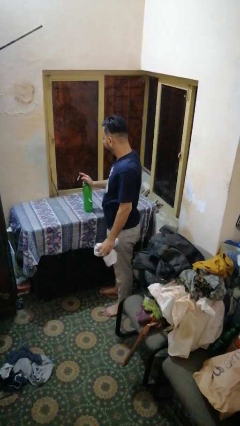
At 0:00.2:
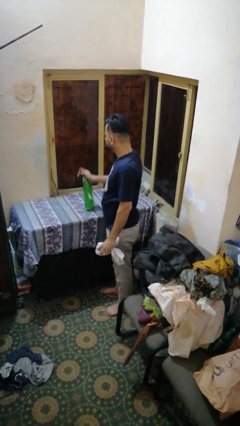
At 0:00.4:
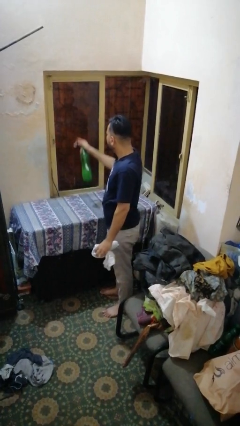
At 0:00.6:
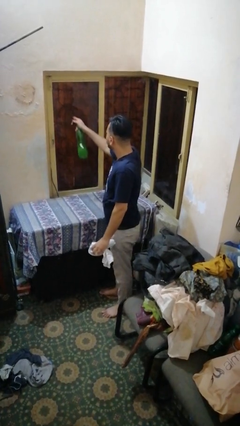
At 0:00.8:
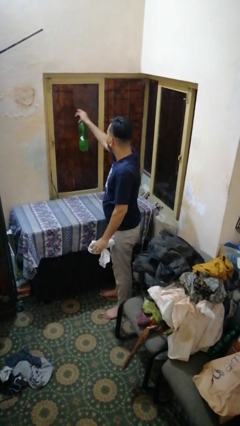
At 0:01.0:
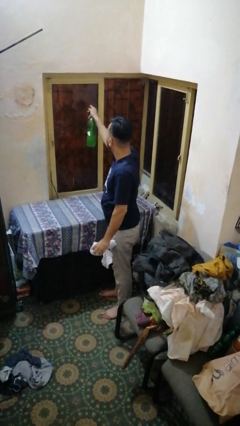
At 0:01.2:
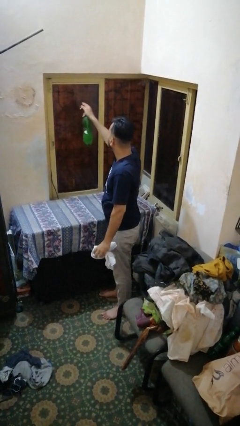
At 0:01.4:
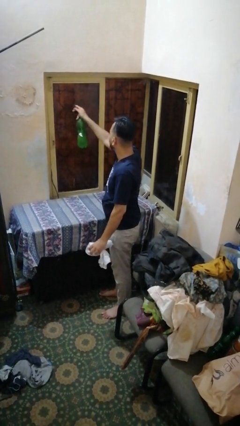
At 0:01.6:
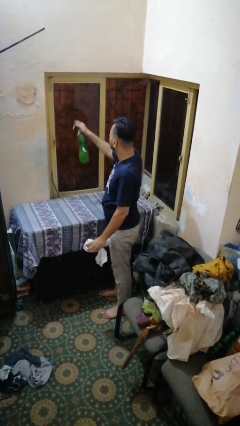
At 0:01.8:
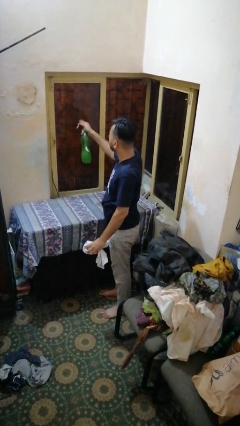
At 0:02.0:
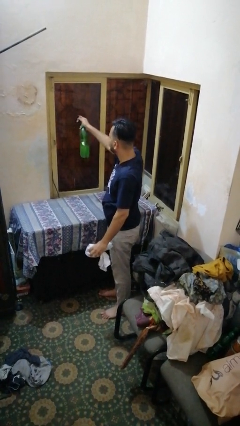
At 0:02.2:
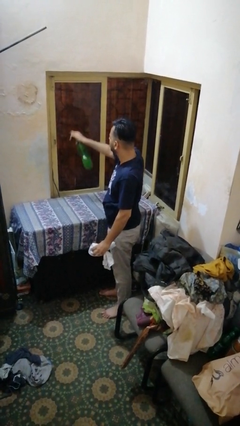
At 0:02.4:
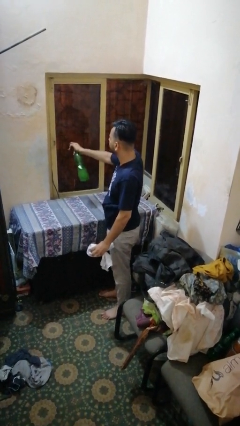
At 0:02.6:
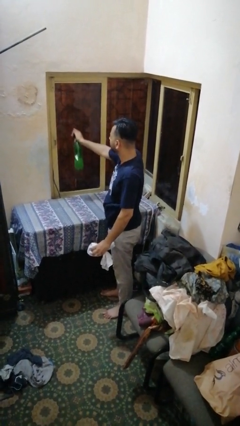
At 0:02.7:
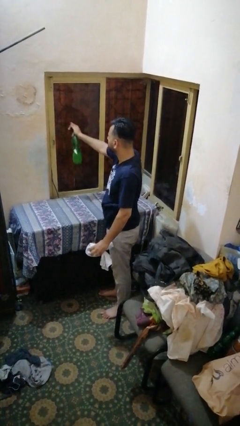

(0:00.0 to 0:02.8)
person sprays from bottle

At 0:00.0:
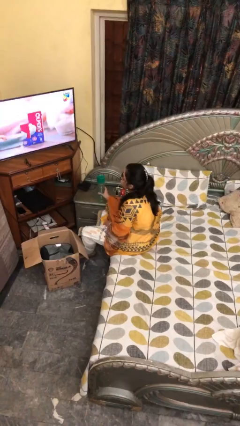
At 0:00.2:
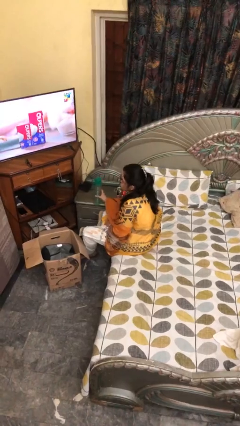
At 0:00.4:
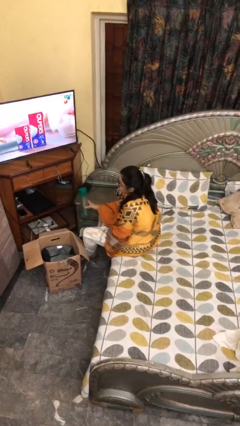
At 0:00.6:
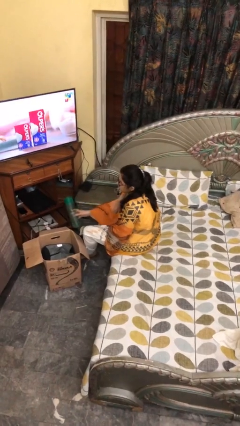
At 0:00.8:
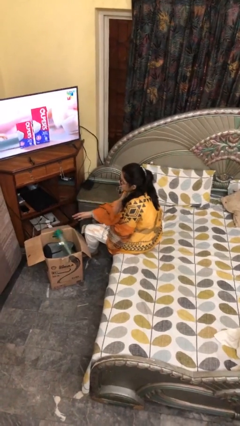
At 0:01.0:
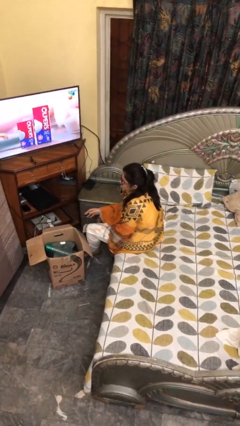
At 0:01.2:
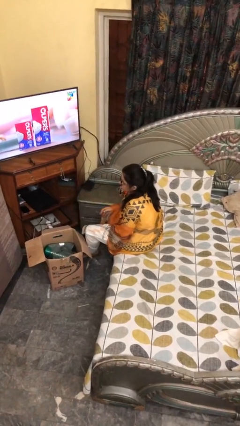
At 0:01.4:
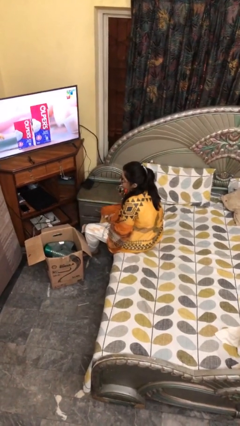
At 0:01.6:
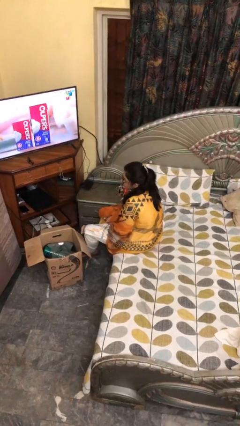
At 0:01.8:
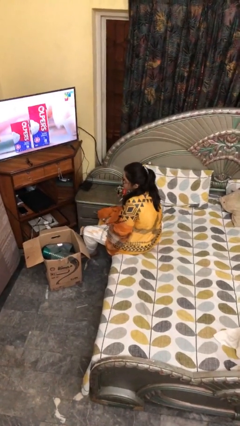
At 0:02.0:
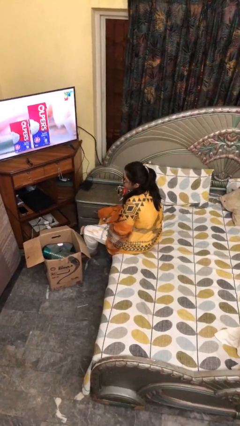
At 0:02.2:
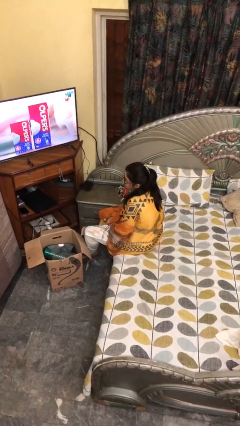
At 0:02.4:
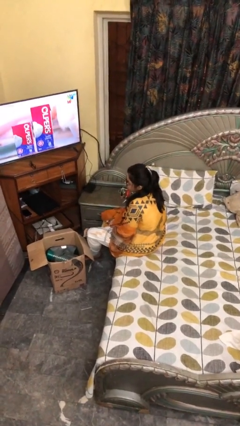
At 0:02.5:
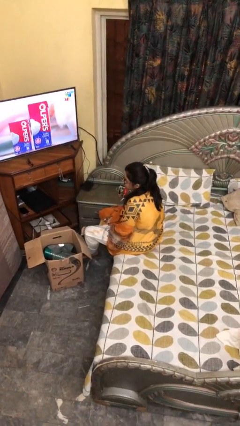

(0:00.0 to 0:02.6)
person puts object into box

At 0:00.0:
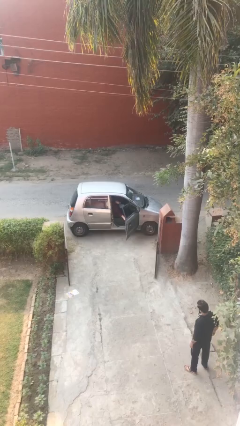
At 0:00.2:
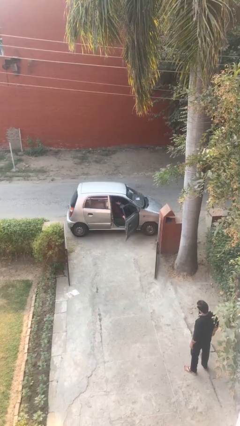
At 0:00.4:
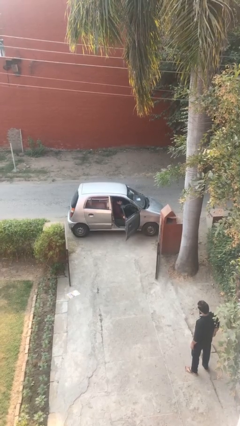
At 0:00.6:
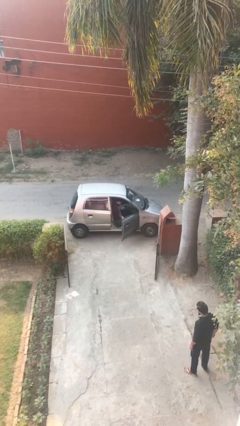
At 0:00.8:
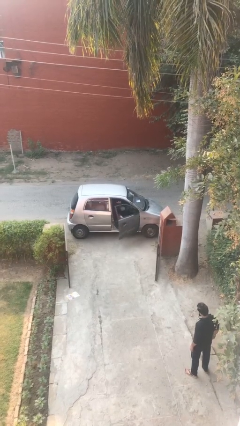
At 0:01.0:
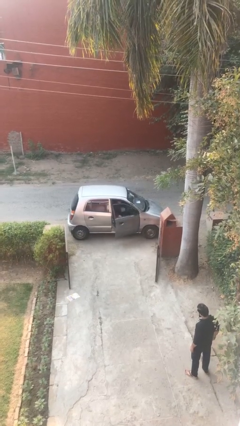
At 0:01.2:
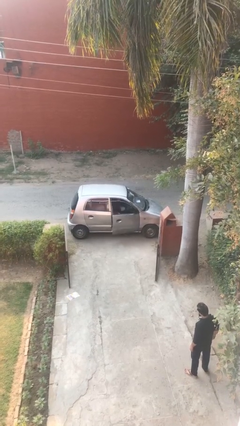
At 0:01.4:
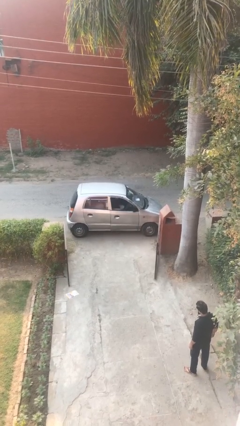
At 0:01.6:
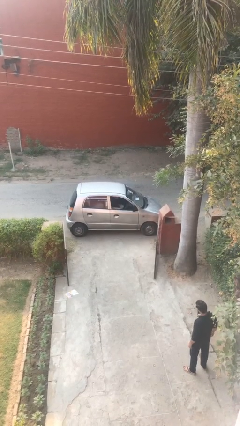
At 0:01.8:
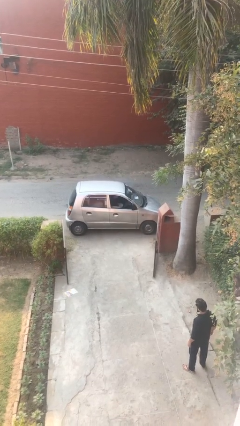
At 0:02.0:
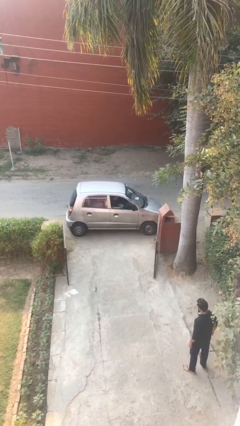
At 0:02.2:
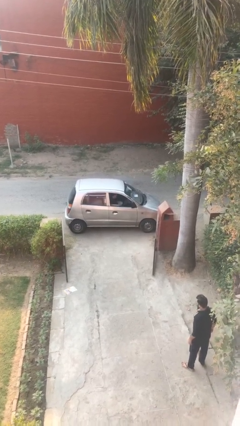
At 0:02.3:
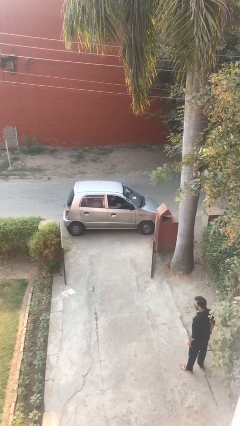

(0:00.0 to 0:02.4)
person closes car door

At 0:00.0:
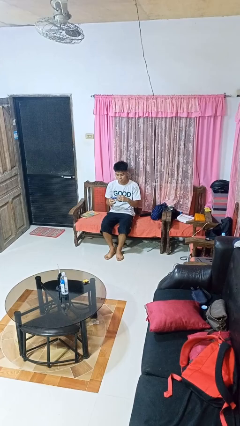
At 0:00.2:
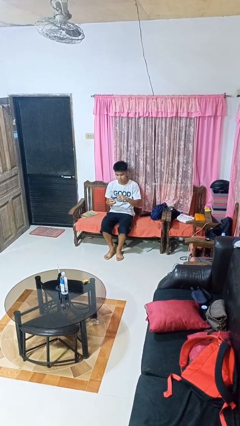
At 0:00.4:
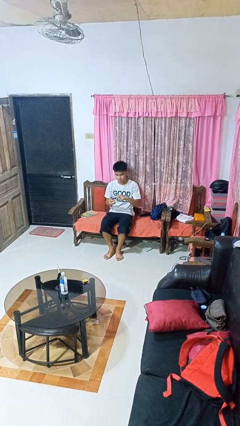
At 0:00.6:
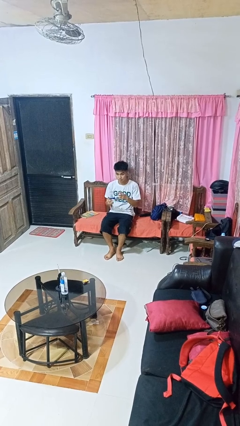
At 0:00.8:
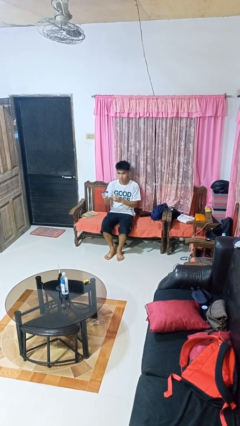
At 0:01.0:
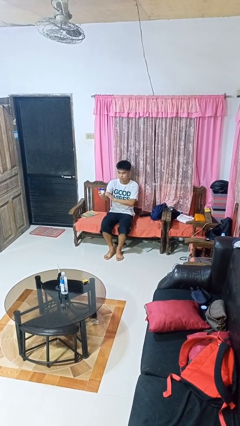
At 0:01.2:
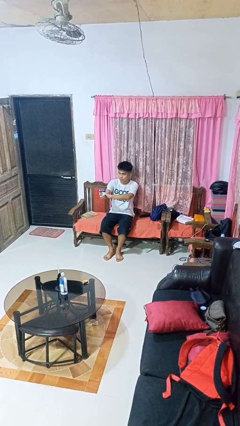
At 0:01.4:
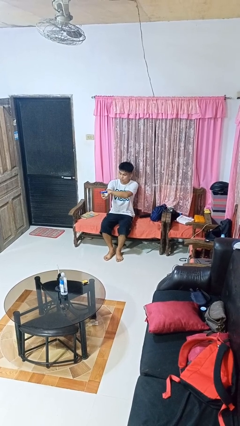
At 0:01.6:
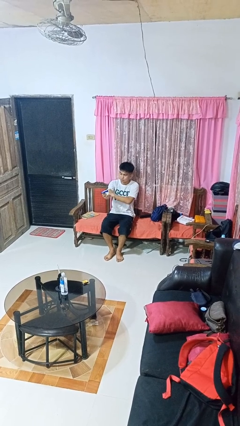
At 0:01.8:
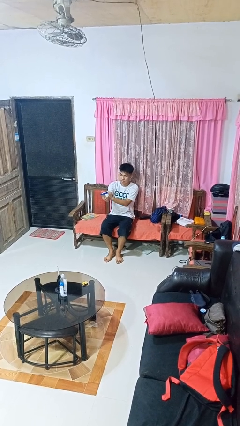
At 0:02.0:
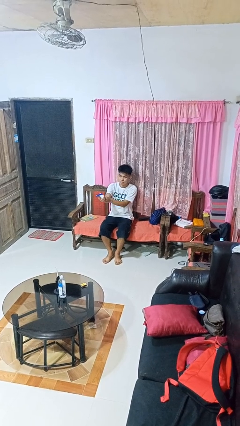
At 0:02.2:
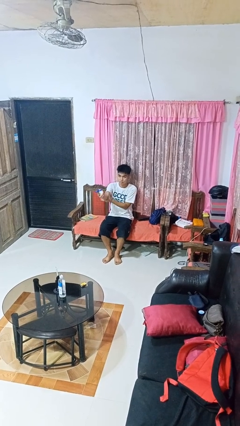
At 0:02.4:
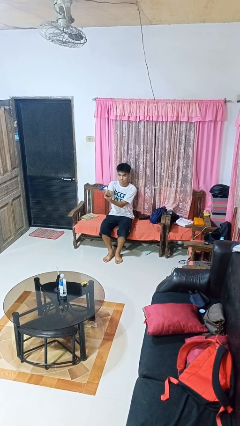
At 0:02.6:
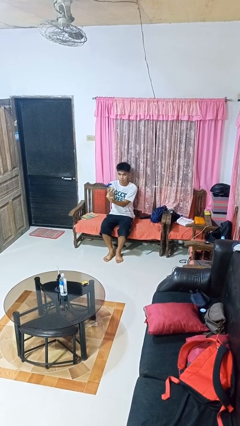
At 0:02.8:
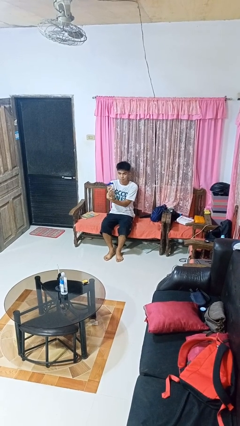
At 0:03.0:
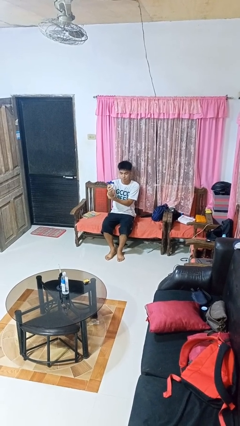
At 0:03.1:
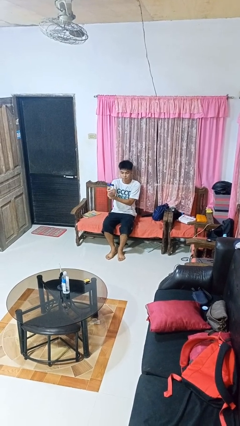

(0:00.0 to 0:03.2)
person applies sunscreen

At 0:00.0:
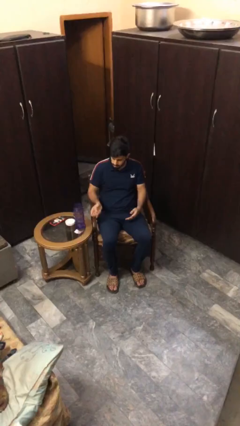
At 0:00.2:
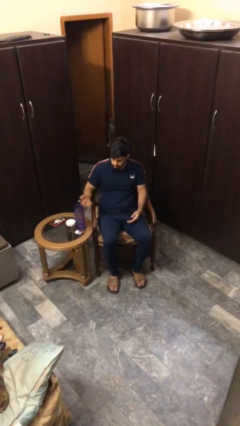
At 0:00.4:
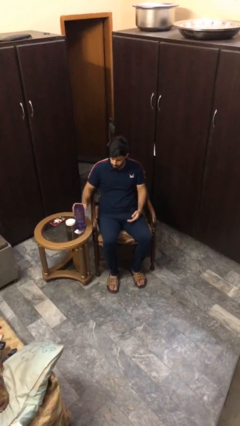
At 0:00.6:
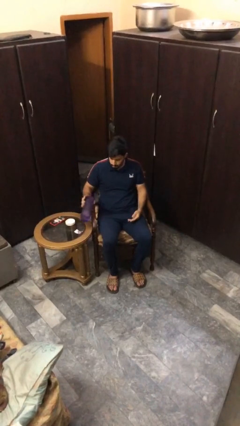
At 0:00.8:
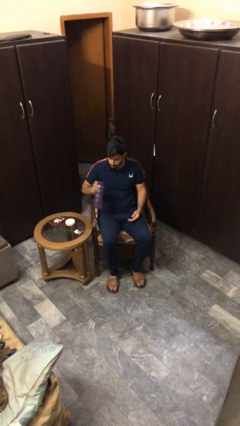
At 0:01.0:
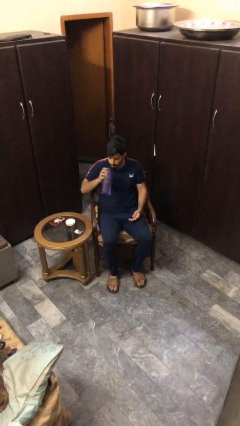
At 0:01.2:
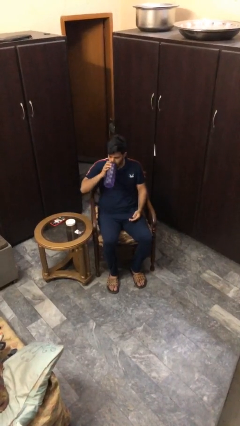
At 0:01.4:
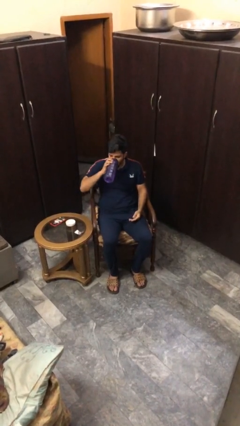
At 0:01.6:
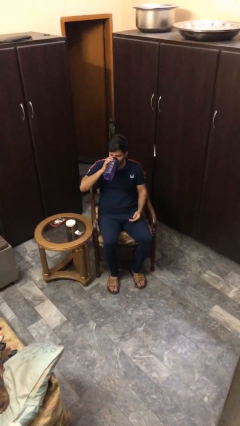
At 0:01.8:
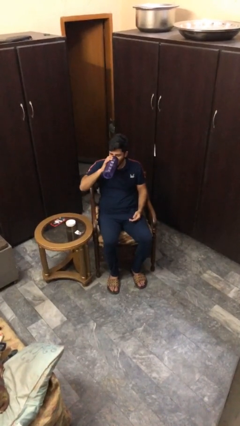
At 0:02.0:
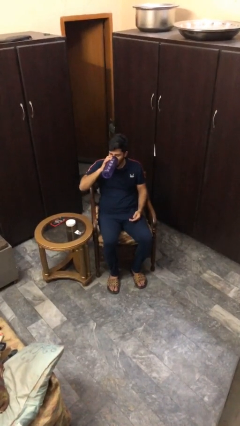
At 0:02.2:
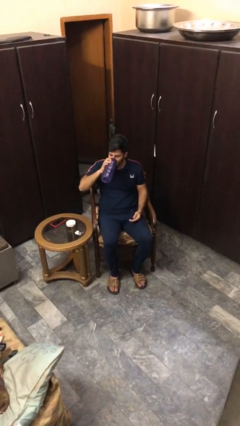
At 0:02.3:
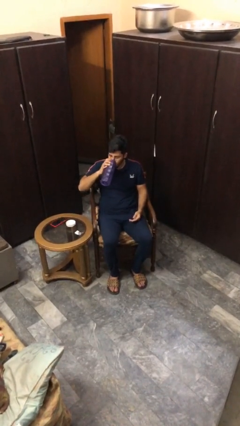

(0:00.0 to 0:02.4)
person drinks from cup

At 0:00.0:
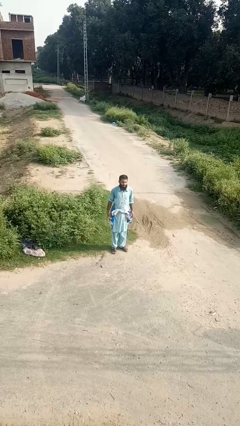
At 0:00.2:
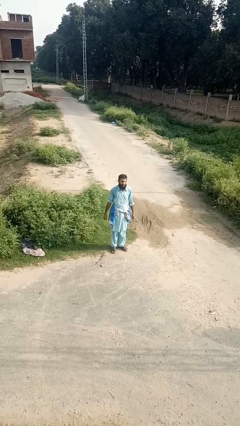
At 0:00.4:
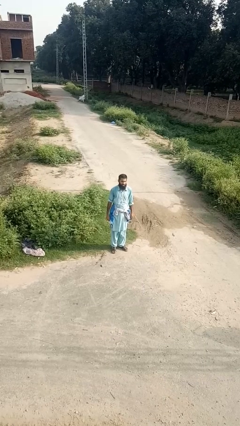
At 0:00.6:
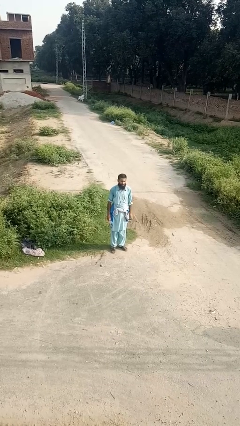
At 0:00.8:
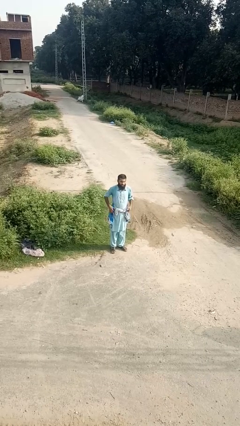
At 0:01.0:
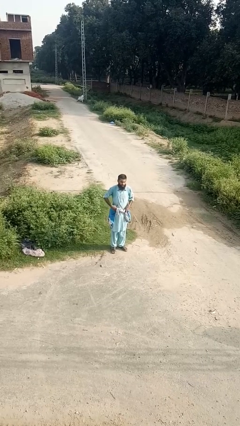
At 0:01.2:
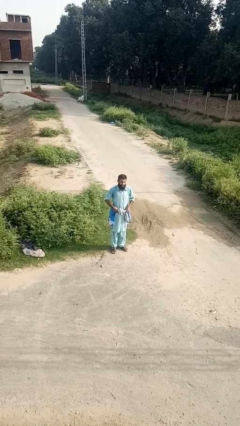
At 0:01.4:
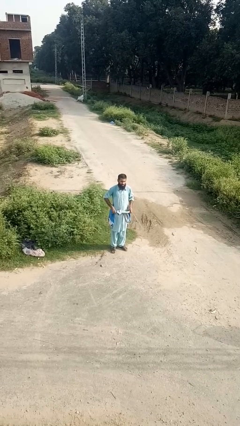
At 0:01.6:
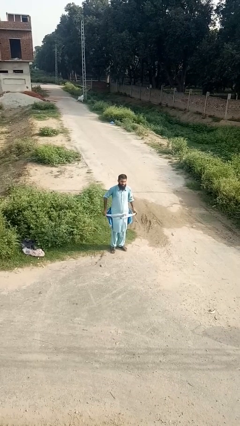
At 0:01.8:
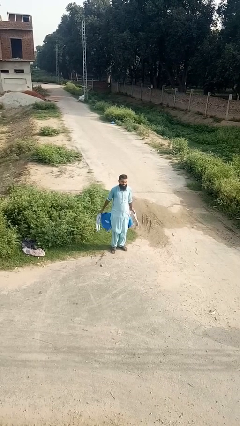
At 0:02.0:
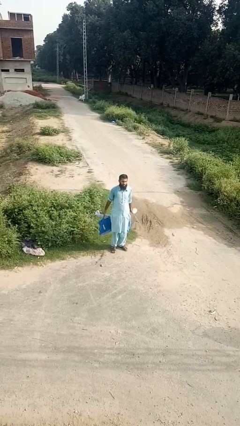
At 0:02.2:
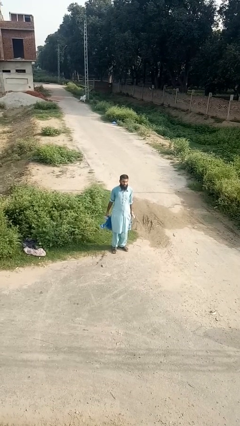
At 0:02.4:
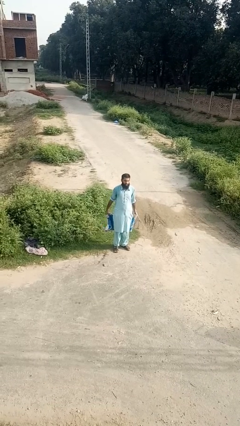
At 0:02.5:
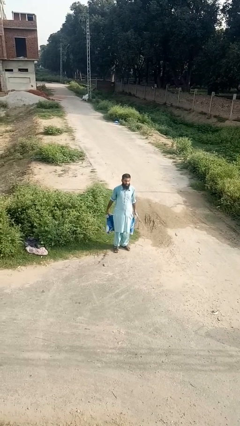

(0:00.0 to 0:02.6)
person unties jacket around waist

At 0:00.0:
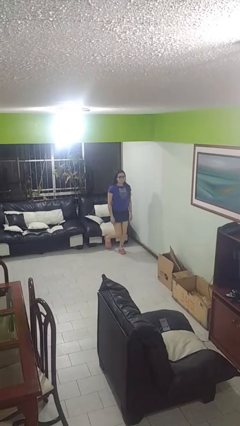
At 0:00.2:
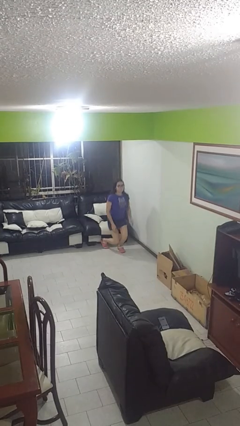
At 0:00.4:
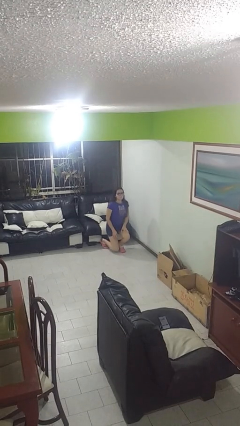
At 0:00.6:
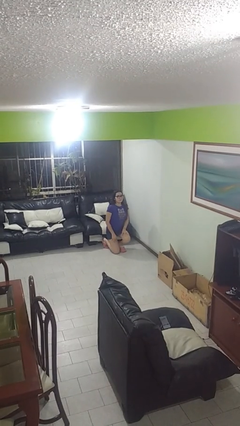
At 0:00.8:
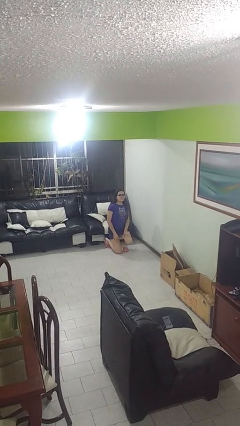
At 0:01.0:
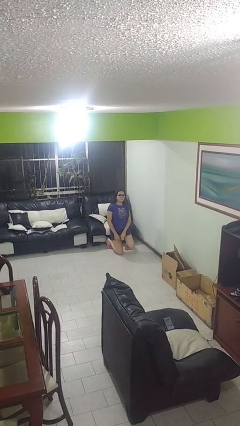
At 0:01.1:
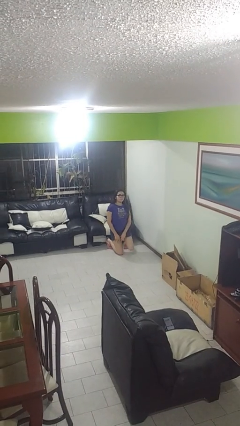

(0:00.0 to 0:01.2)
person kneels
